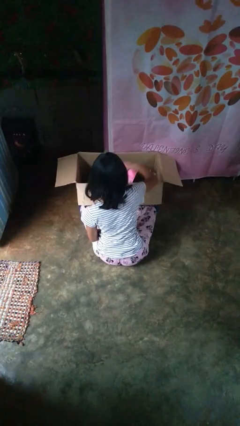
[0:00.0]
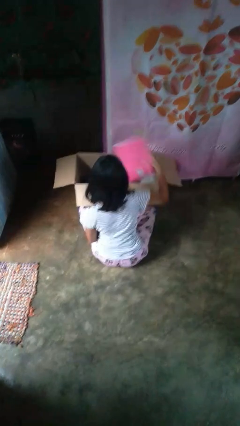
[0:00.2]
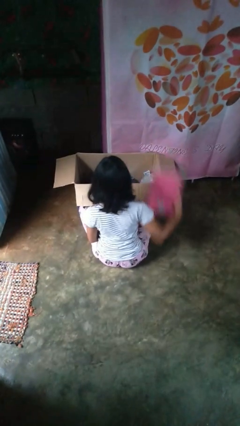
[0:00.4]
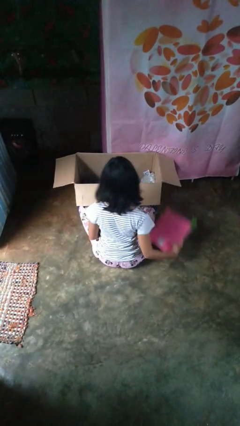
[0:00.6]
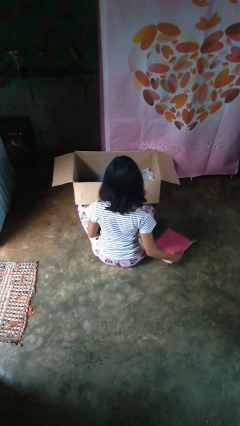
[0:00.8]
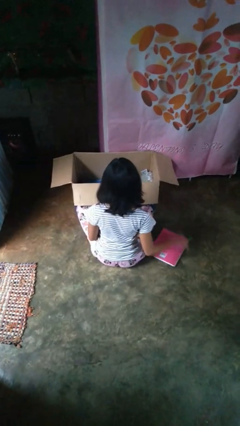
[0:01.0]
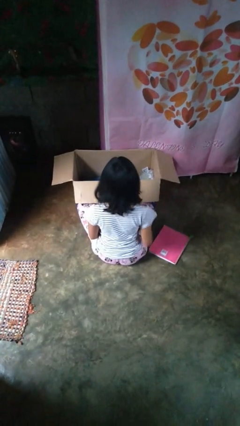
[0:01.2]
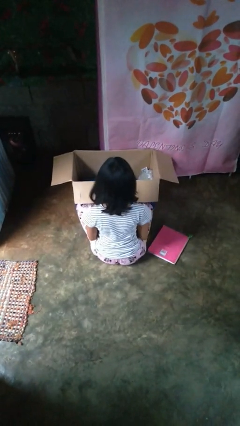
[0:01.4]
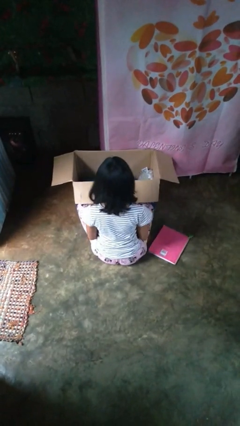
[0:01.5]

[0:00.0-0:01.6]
person takes object from box

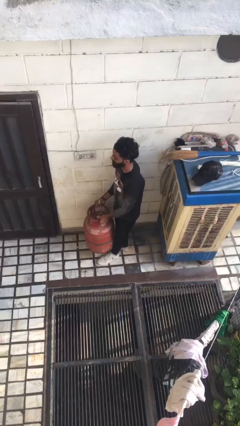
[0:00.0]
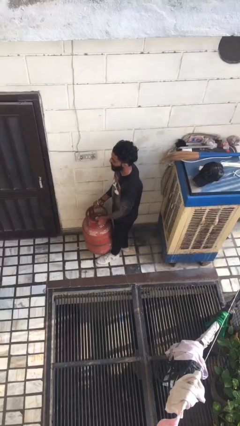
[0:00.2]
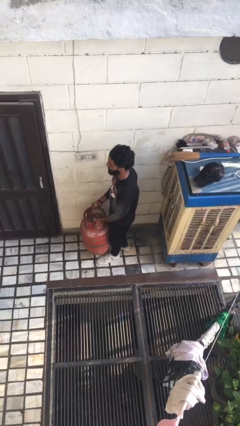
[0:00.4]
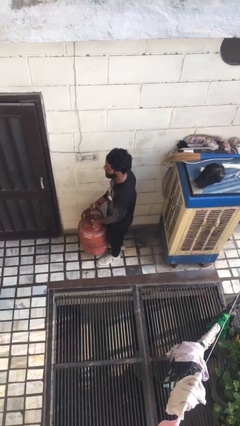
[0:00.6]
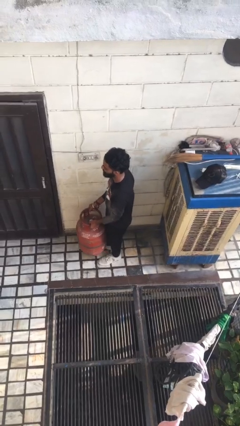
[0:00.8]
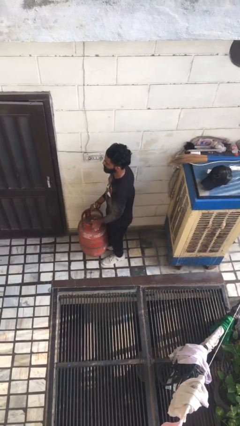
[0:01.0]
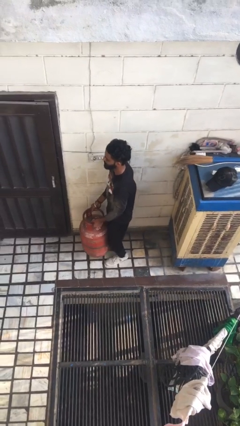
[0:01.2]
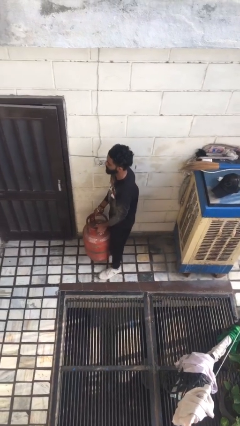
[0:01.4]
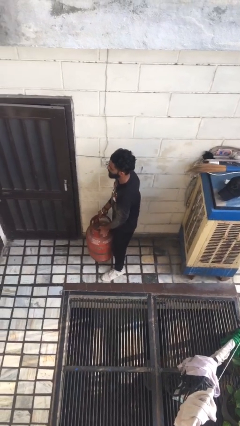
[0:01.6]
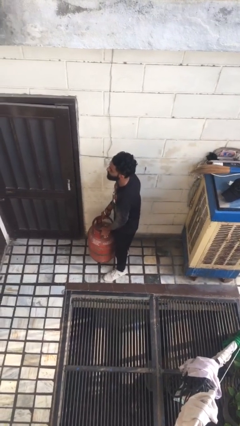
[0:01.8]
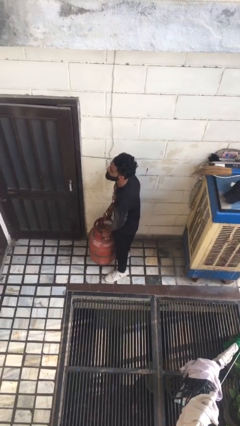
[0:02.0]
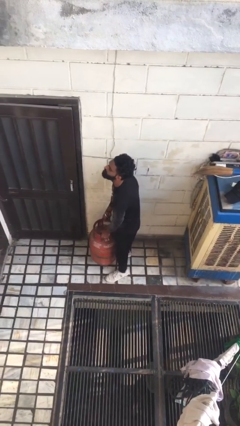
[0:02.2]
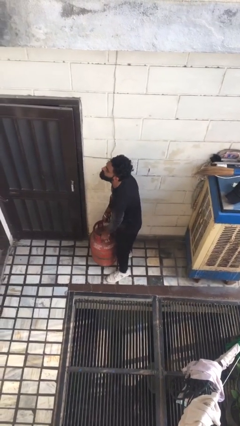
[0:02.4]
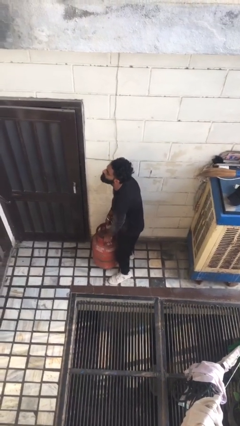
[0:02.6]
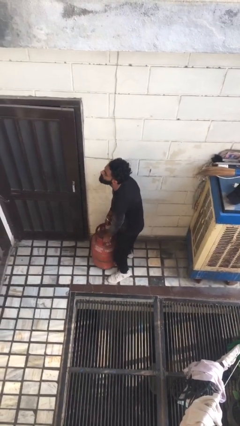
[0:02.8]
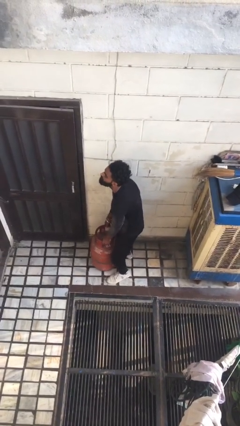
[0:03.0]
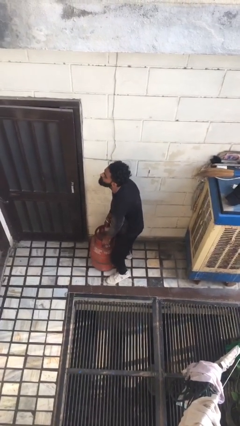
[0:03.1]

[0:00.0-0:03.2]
person carries heavy object

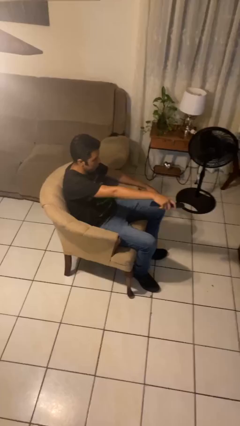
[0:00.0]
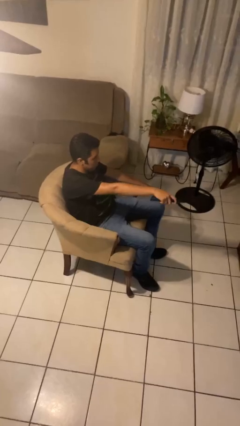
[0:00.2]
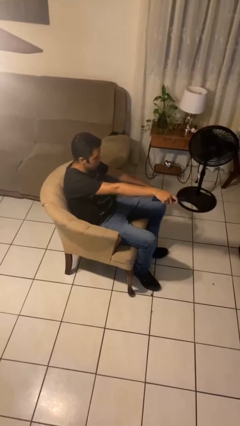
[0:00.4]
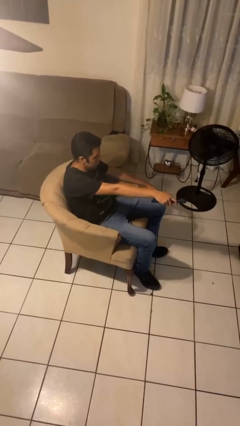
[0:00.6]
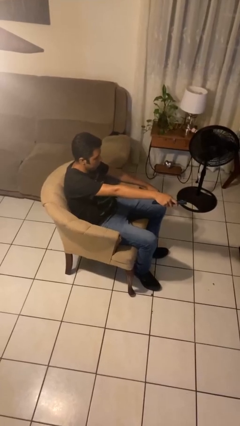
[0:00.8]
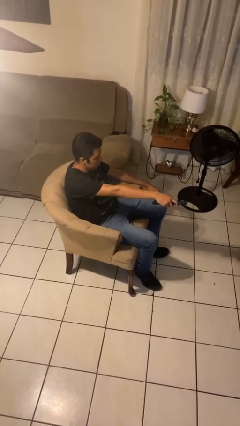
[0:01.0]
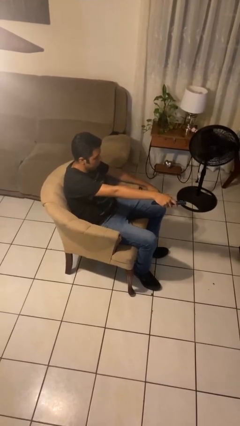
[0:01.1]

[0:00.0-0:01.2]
person uses television remote

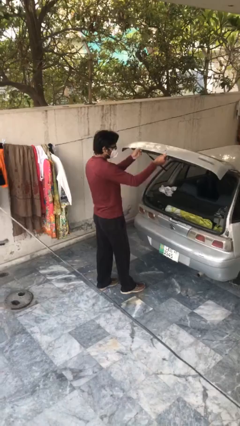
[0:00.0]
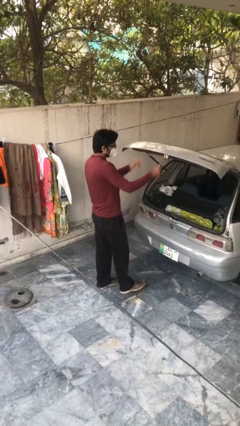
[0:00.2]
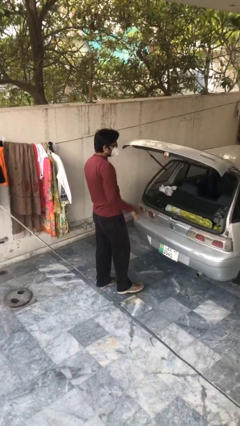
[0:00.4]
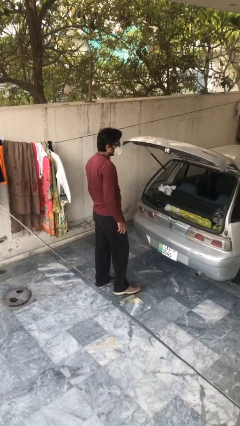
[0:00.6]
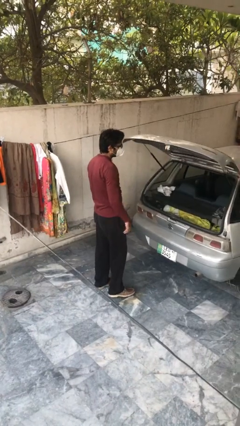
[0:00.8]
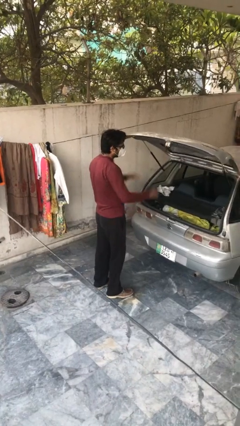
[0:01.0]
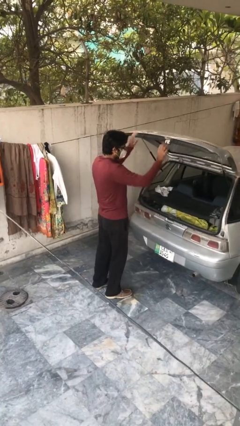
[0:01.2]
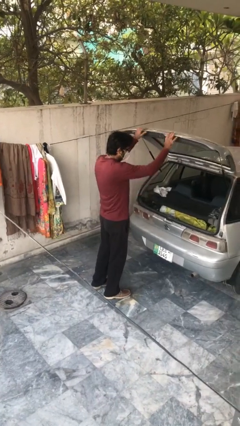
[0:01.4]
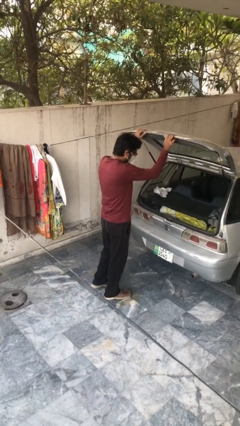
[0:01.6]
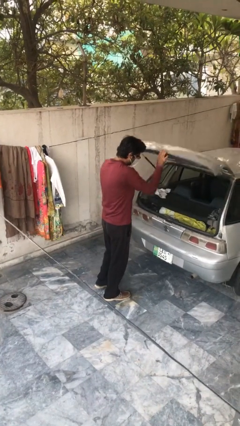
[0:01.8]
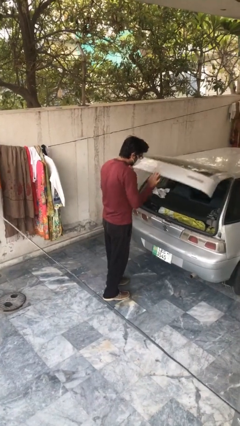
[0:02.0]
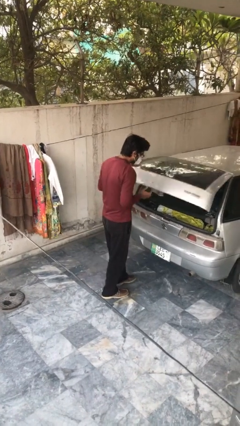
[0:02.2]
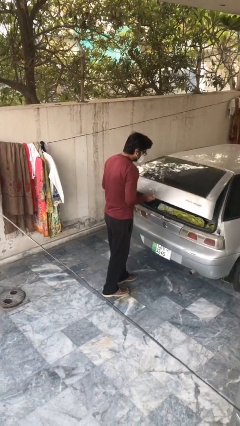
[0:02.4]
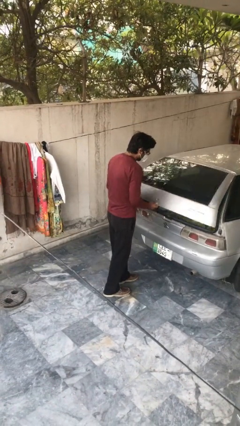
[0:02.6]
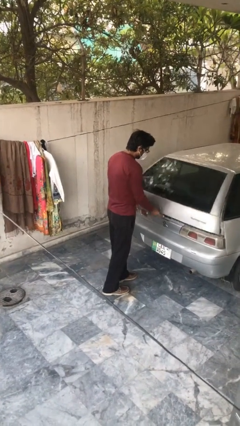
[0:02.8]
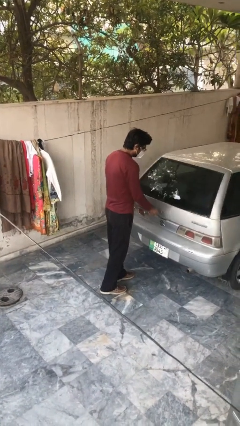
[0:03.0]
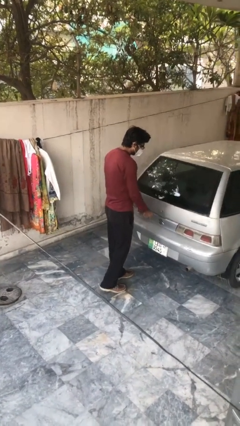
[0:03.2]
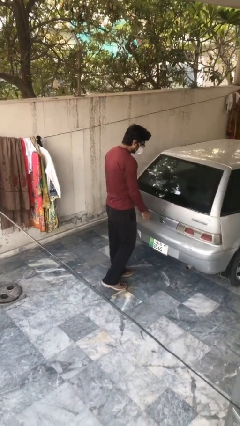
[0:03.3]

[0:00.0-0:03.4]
person closes car trunk

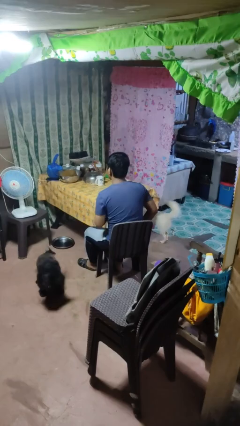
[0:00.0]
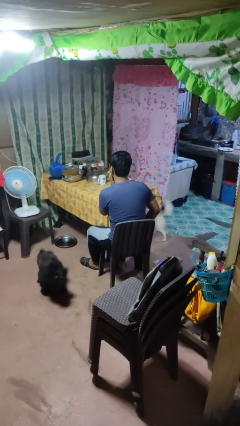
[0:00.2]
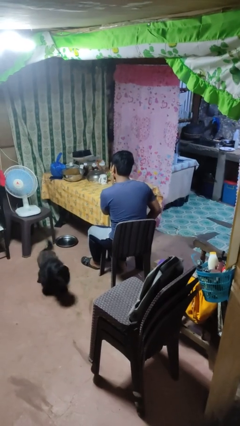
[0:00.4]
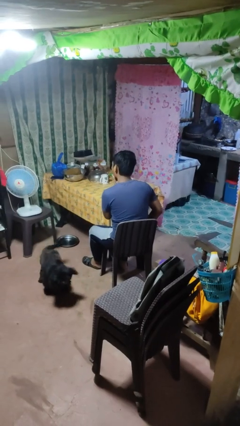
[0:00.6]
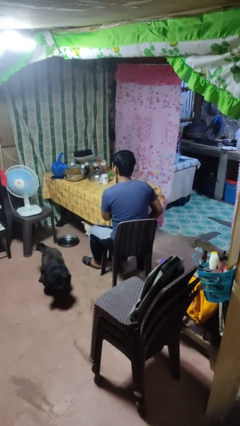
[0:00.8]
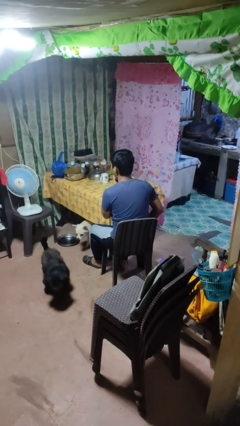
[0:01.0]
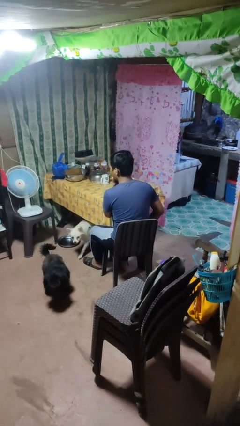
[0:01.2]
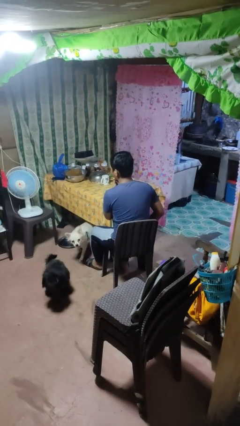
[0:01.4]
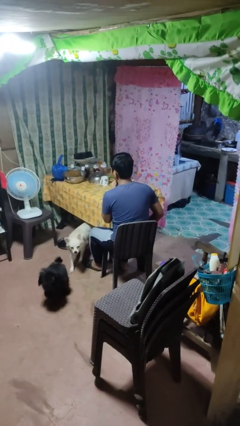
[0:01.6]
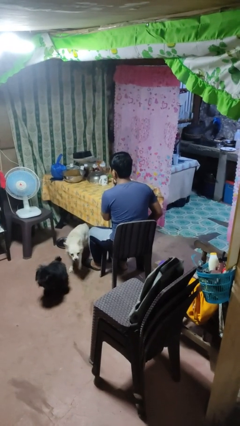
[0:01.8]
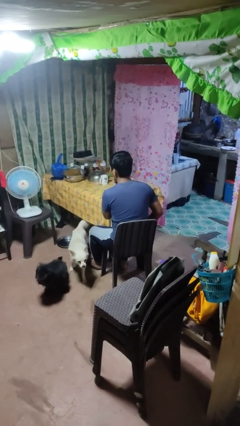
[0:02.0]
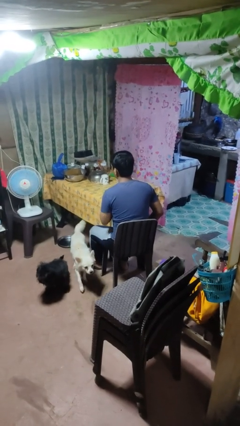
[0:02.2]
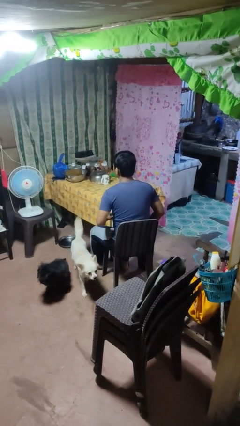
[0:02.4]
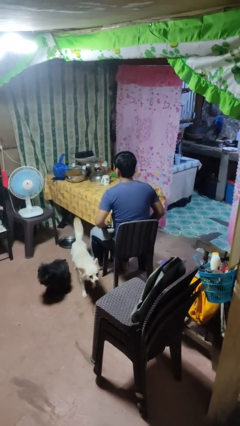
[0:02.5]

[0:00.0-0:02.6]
person strokes chin

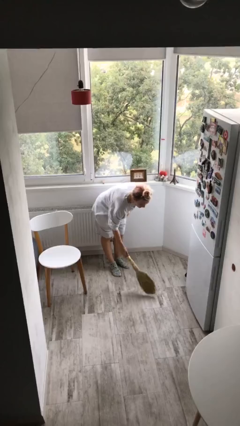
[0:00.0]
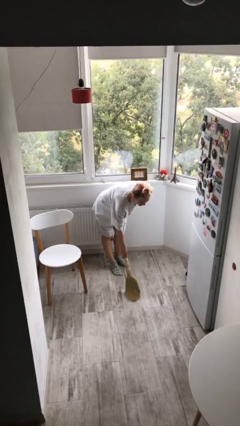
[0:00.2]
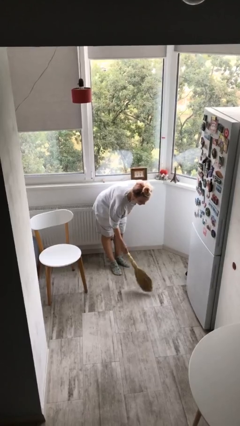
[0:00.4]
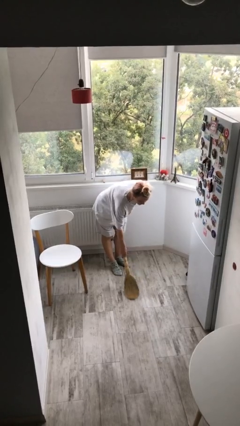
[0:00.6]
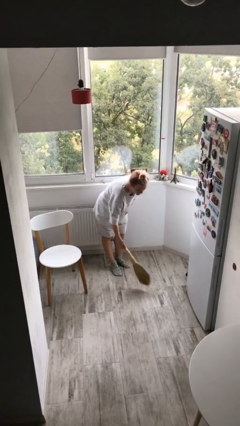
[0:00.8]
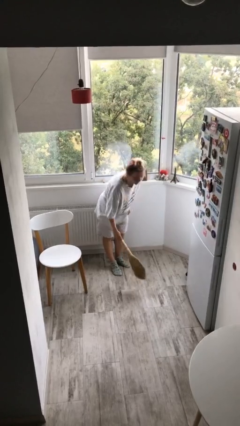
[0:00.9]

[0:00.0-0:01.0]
person sweeps floor

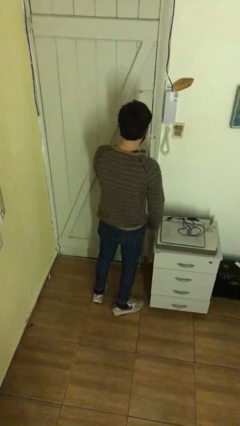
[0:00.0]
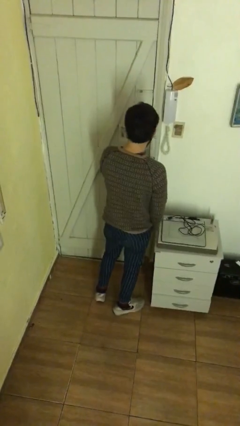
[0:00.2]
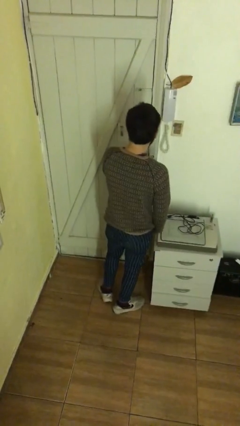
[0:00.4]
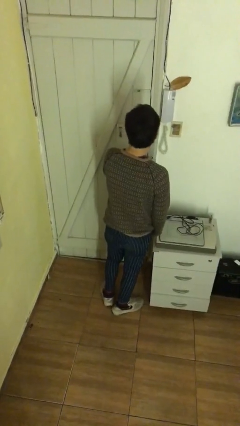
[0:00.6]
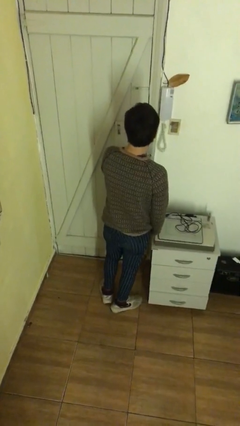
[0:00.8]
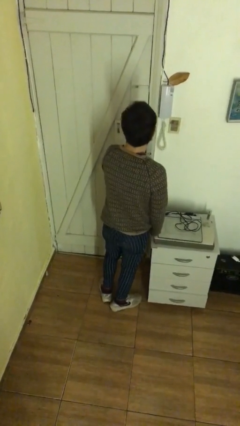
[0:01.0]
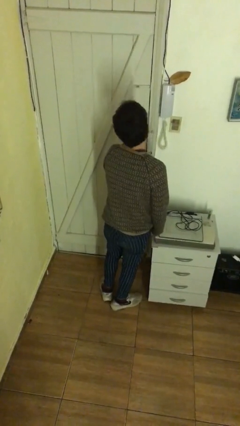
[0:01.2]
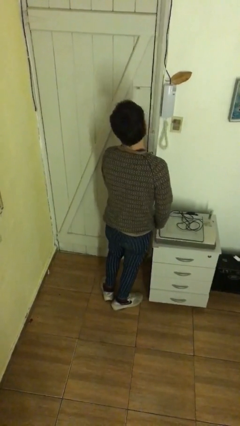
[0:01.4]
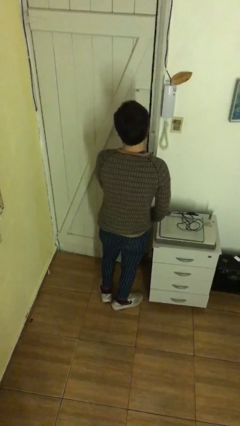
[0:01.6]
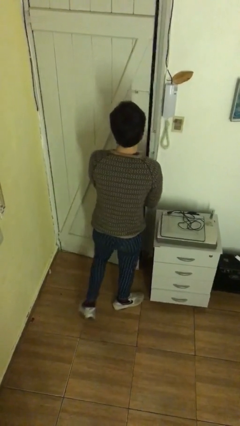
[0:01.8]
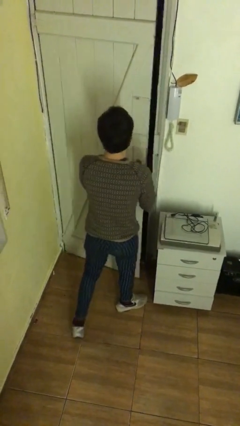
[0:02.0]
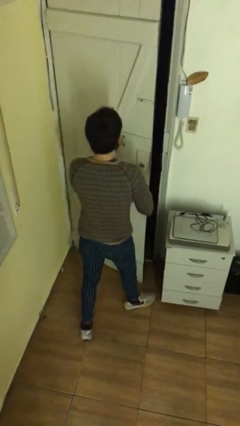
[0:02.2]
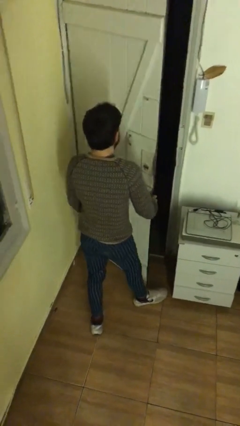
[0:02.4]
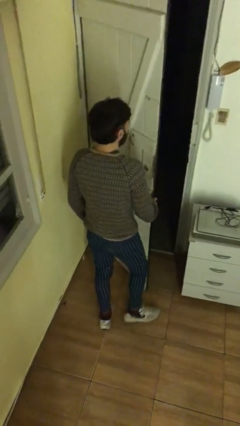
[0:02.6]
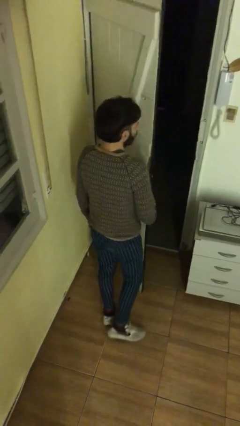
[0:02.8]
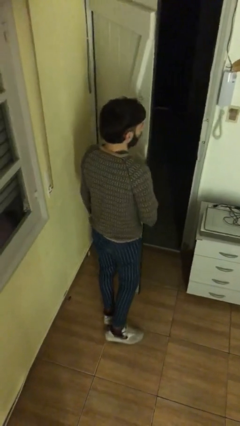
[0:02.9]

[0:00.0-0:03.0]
person opens facility door

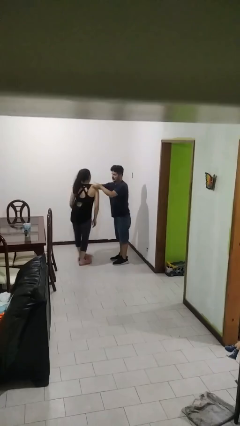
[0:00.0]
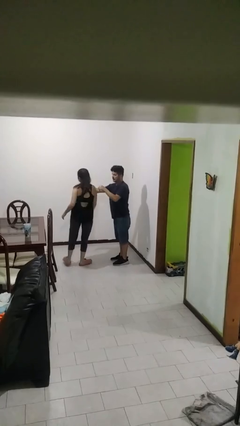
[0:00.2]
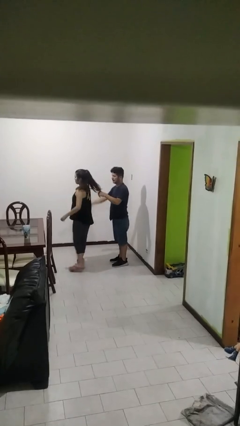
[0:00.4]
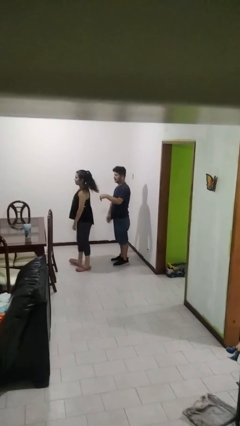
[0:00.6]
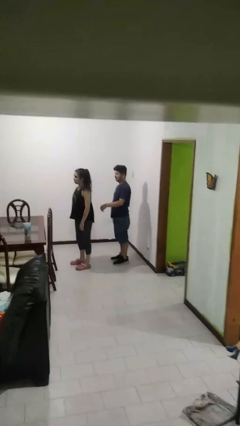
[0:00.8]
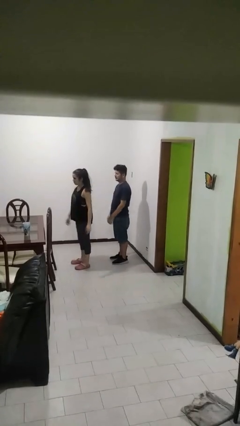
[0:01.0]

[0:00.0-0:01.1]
person spins person around
